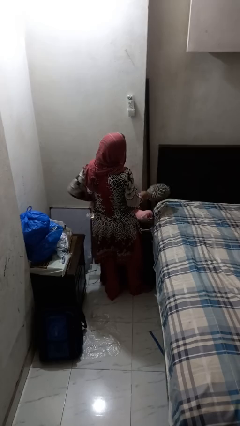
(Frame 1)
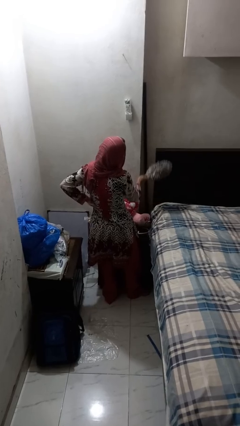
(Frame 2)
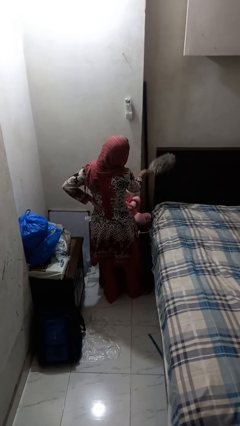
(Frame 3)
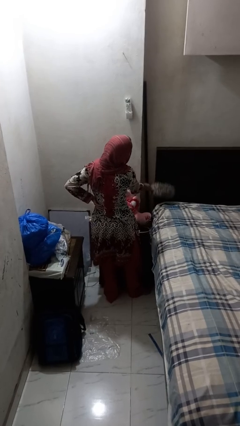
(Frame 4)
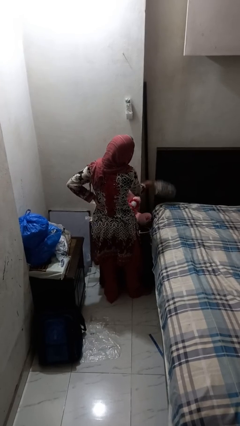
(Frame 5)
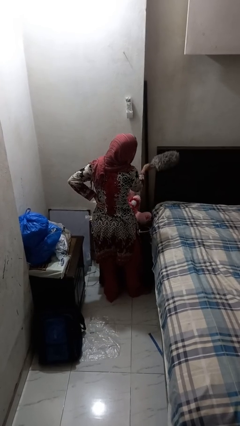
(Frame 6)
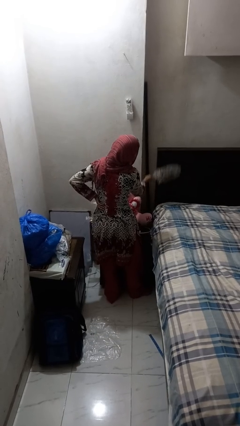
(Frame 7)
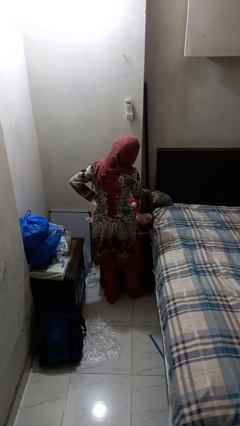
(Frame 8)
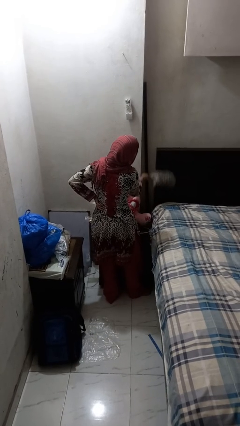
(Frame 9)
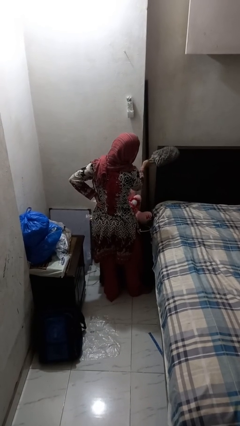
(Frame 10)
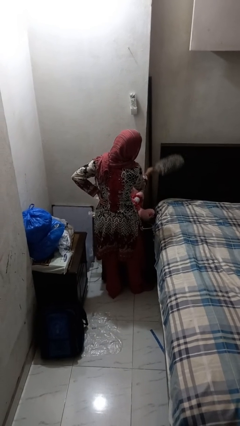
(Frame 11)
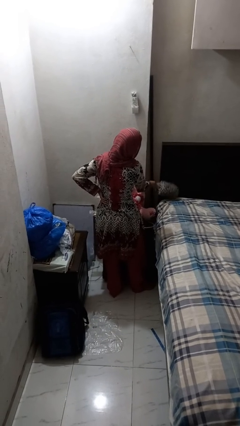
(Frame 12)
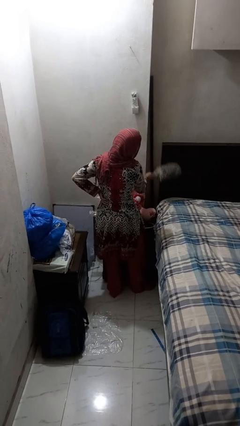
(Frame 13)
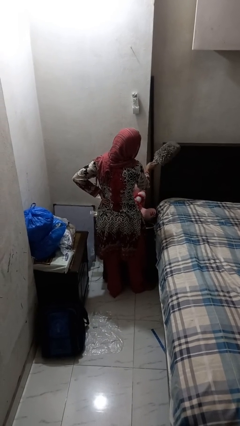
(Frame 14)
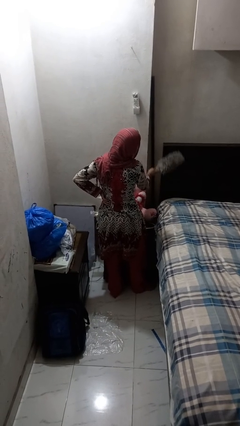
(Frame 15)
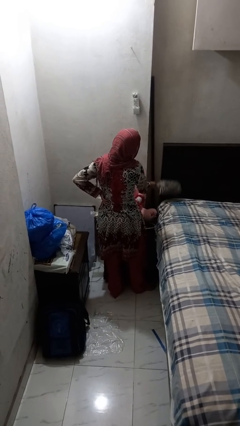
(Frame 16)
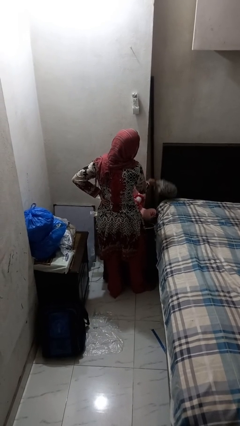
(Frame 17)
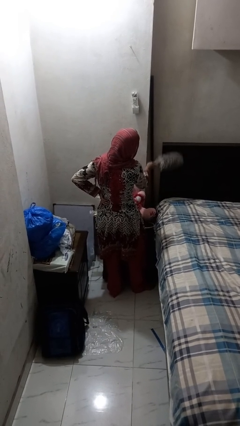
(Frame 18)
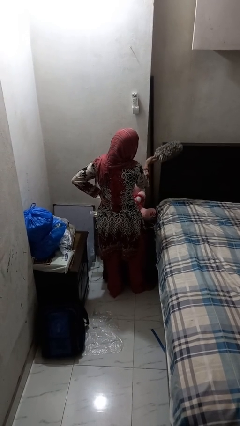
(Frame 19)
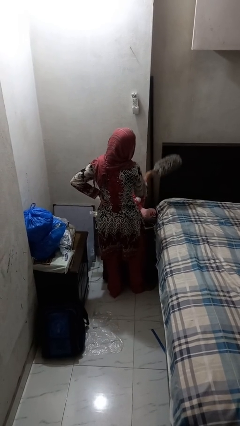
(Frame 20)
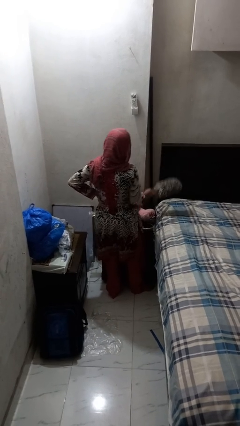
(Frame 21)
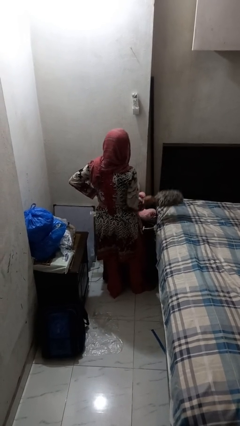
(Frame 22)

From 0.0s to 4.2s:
person dusts furniture

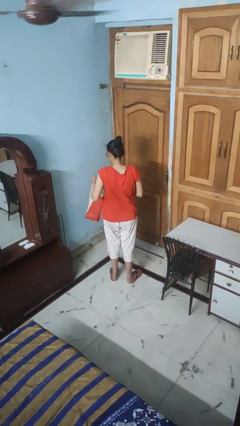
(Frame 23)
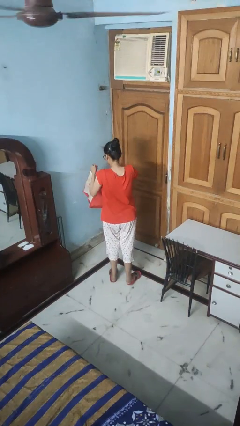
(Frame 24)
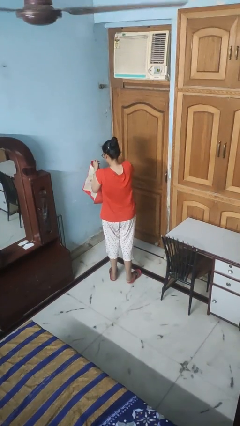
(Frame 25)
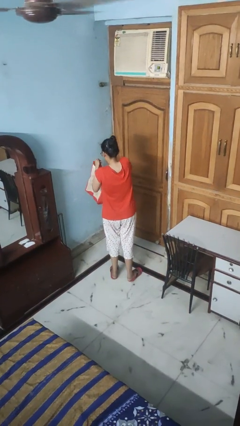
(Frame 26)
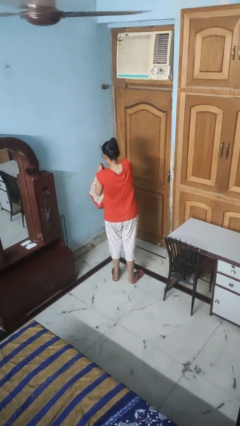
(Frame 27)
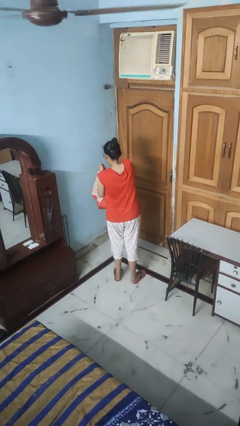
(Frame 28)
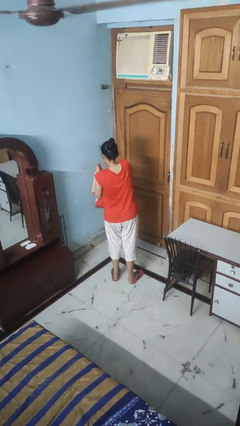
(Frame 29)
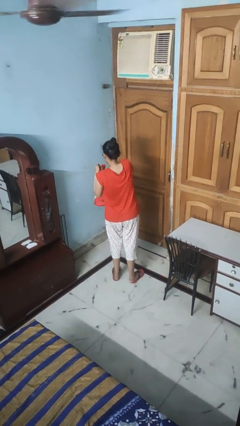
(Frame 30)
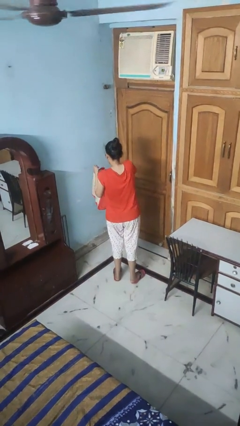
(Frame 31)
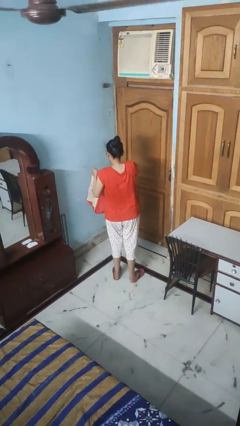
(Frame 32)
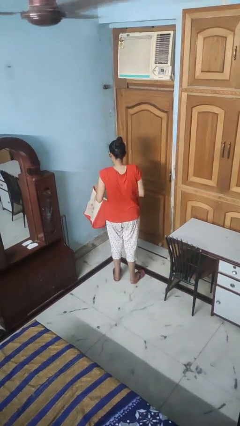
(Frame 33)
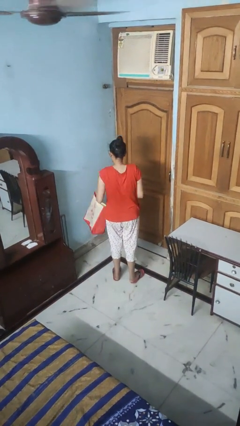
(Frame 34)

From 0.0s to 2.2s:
person searches in bag

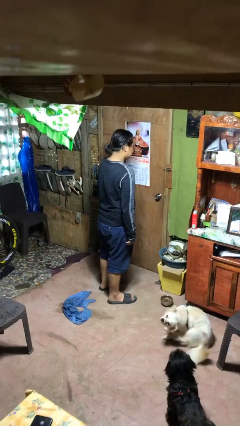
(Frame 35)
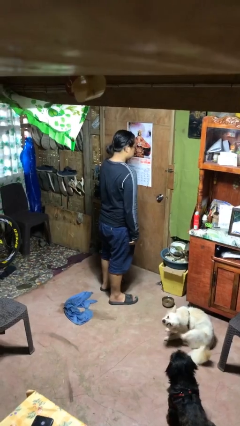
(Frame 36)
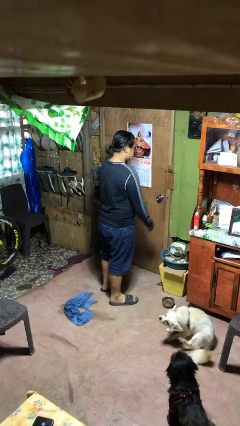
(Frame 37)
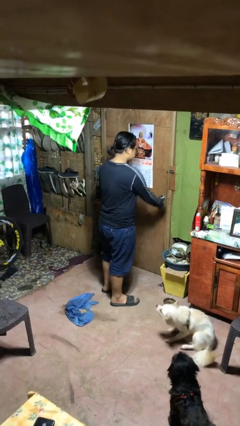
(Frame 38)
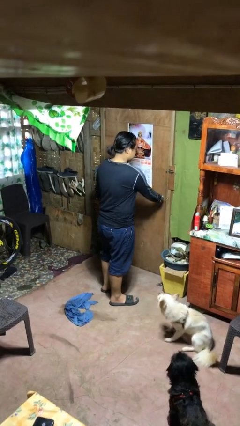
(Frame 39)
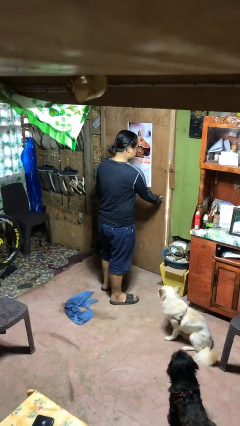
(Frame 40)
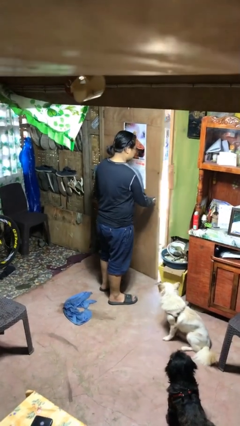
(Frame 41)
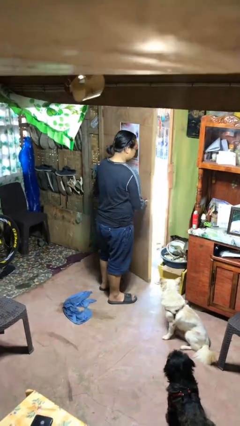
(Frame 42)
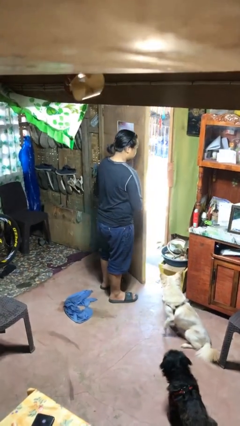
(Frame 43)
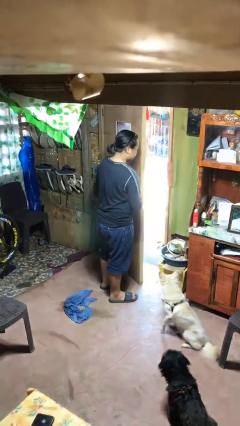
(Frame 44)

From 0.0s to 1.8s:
person opens facility door

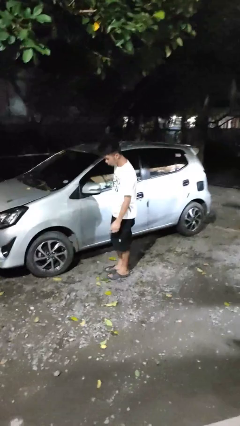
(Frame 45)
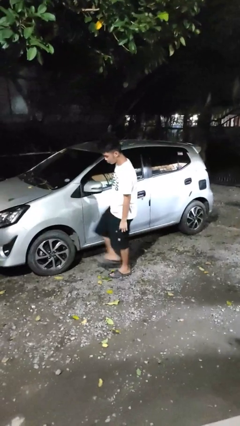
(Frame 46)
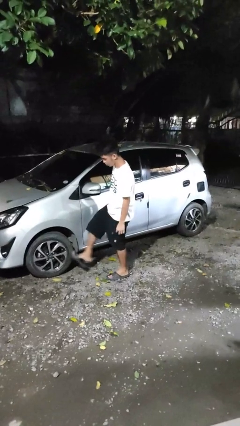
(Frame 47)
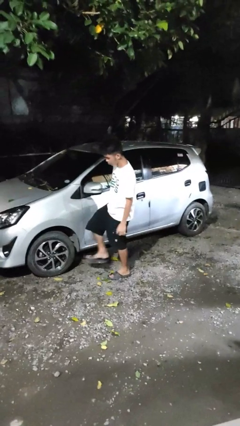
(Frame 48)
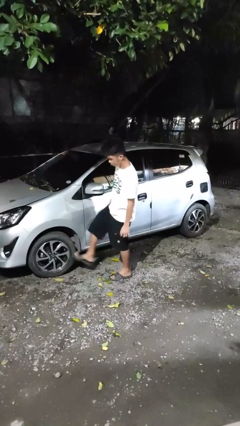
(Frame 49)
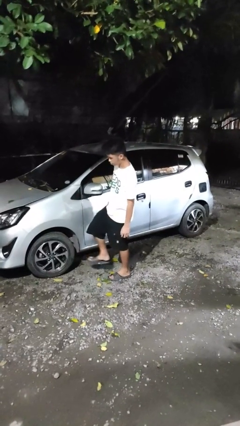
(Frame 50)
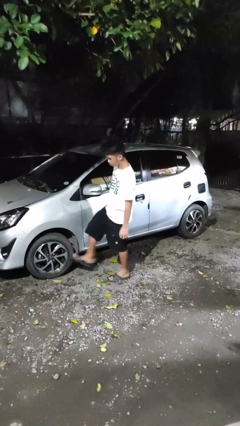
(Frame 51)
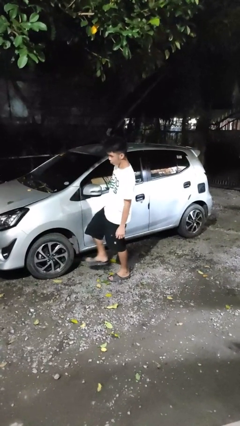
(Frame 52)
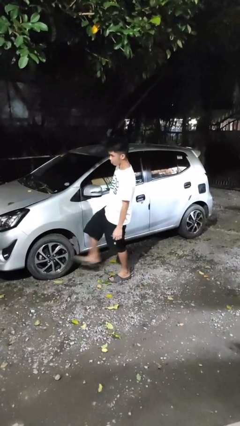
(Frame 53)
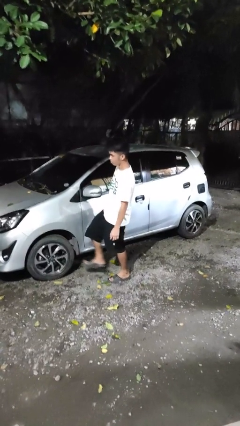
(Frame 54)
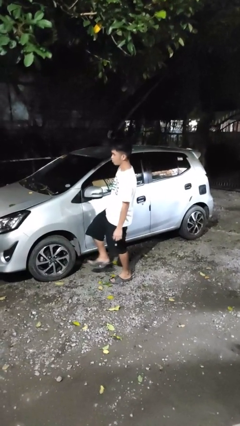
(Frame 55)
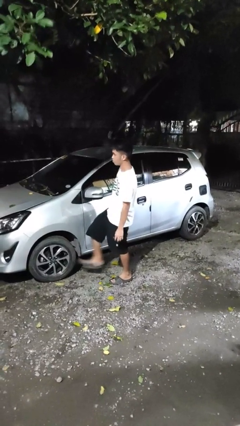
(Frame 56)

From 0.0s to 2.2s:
person kicks car tires

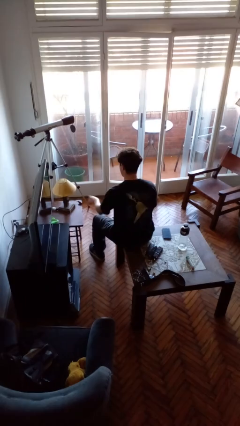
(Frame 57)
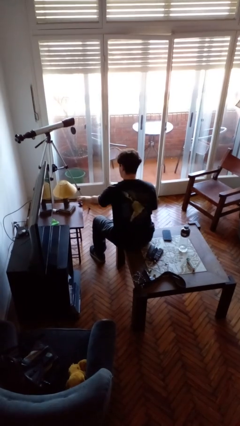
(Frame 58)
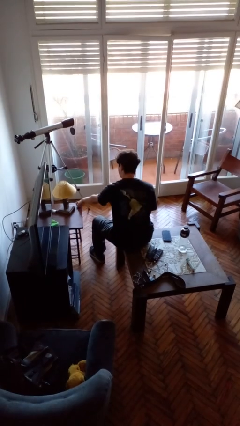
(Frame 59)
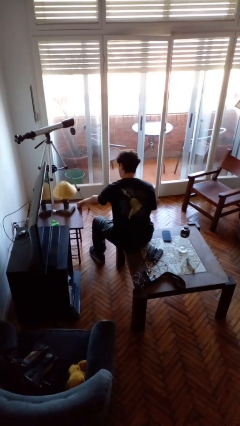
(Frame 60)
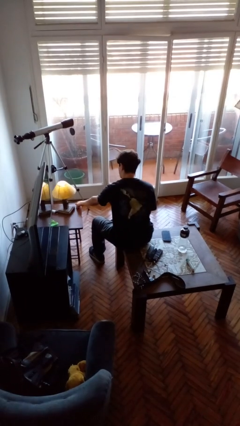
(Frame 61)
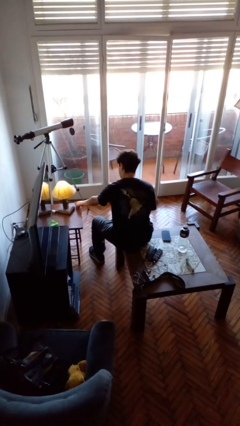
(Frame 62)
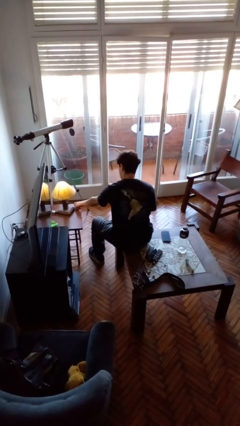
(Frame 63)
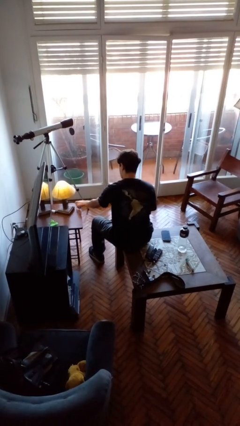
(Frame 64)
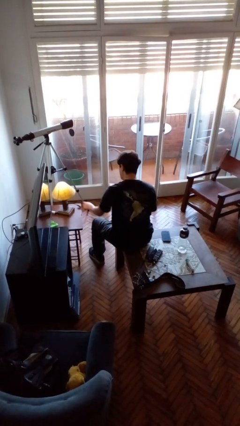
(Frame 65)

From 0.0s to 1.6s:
person turns on lamp

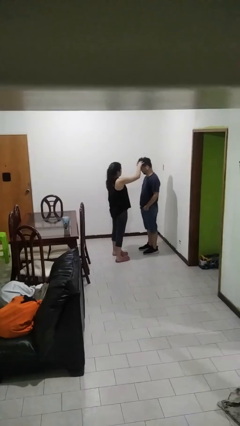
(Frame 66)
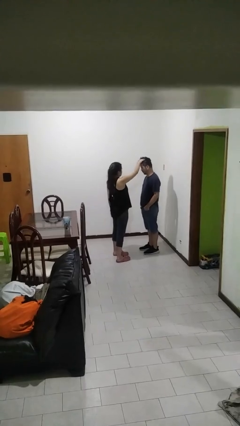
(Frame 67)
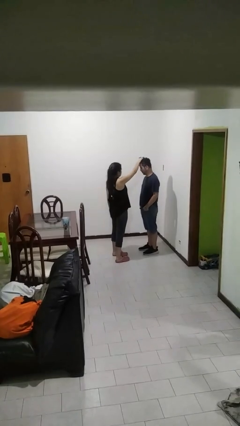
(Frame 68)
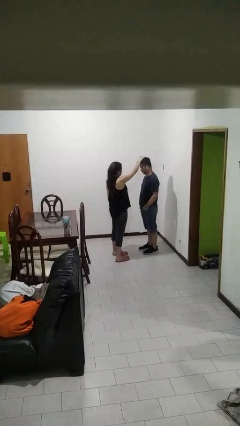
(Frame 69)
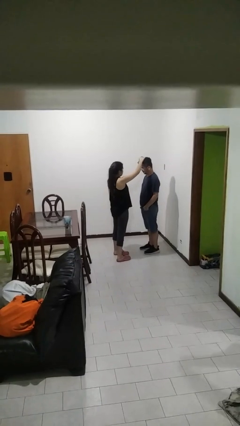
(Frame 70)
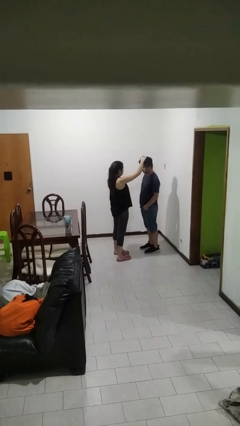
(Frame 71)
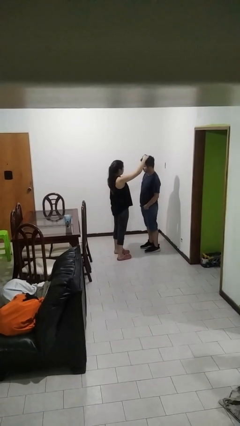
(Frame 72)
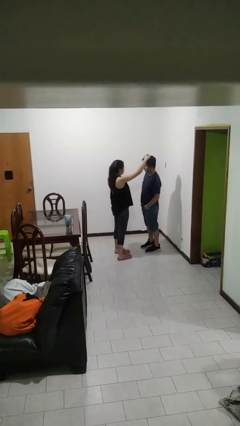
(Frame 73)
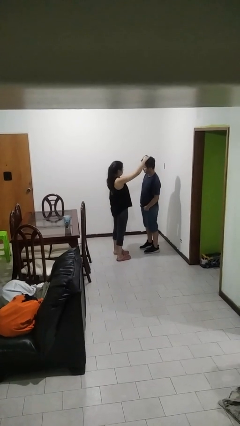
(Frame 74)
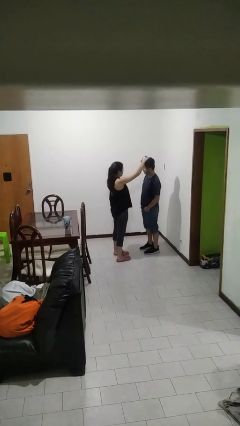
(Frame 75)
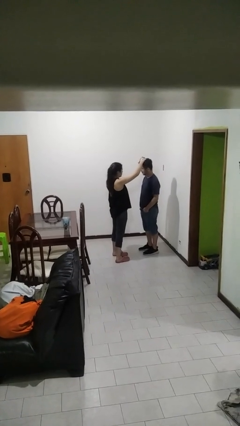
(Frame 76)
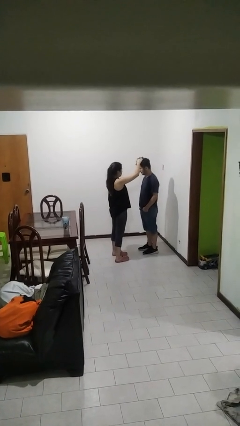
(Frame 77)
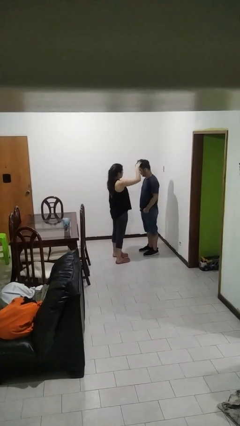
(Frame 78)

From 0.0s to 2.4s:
person grabs person by hair

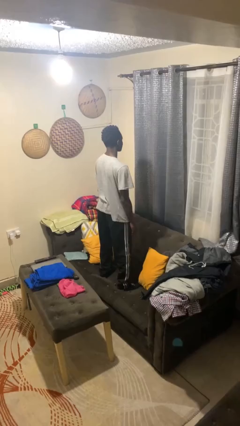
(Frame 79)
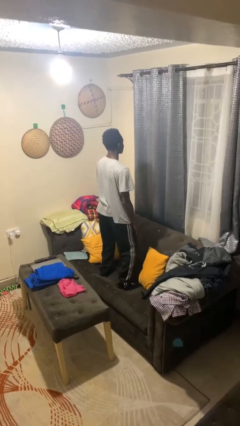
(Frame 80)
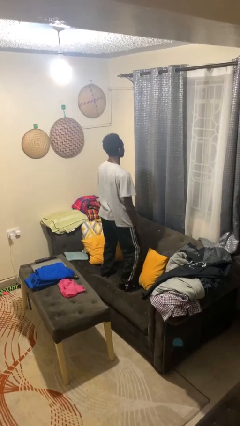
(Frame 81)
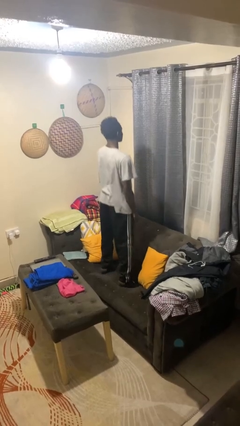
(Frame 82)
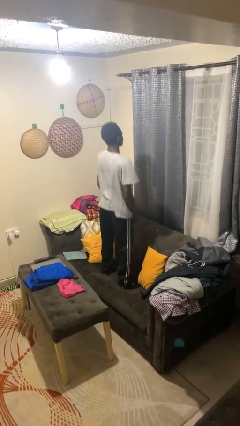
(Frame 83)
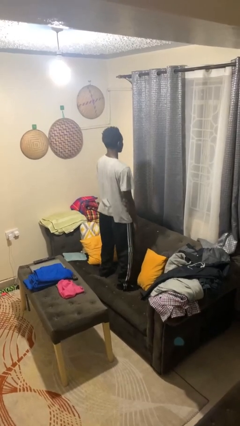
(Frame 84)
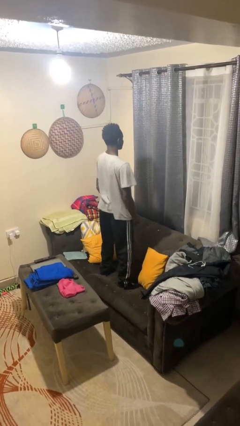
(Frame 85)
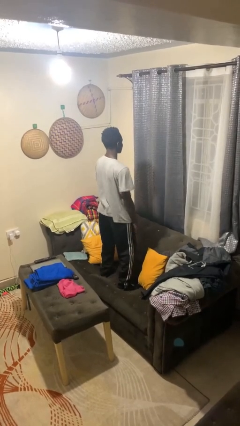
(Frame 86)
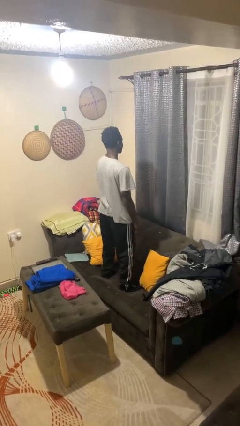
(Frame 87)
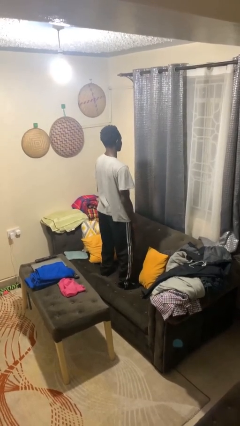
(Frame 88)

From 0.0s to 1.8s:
person jumps on couch

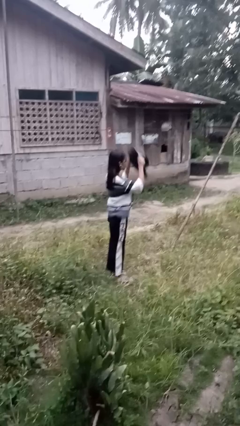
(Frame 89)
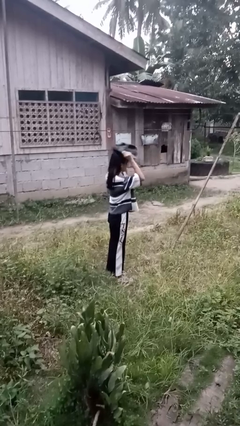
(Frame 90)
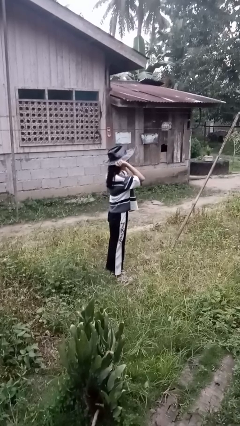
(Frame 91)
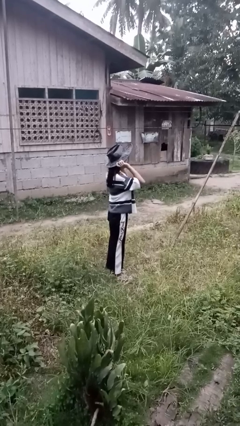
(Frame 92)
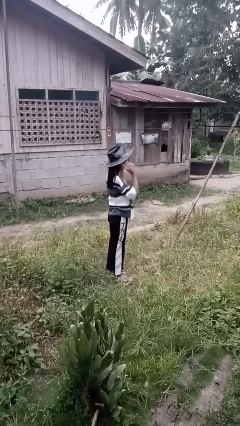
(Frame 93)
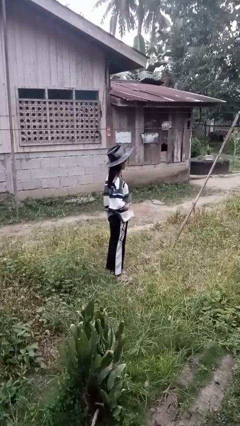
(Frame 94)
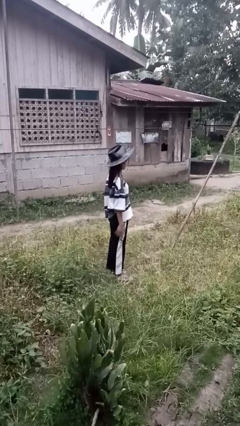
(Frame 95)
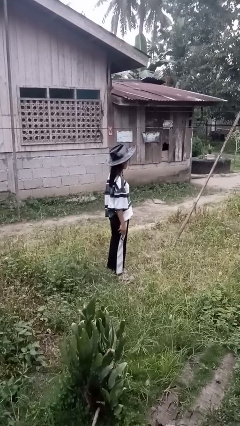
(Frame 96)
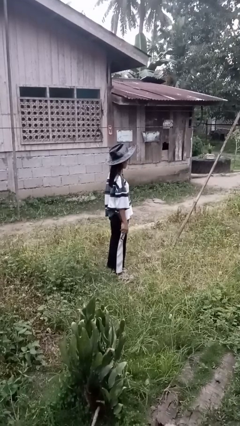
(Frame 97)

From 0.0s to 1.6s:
person puts on hat
